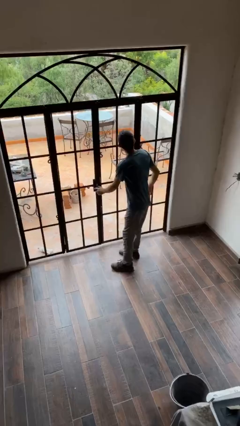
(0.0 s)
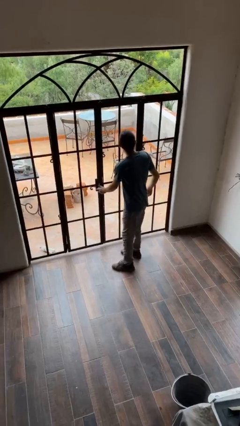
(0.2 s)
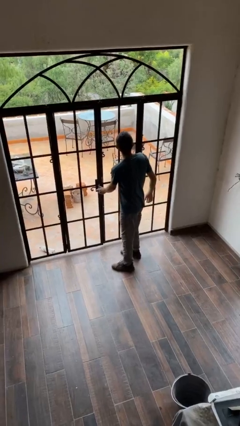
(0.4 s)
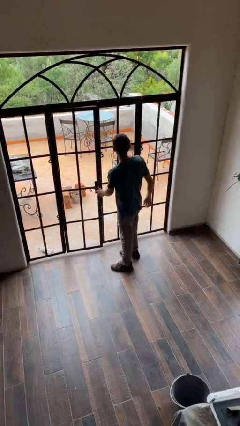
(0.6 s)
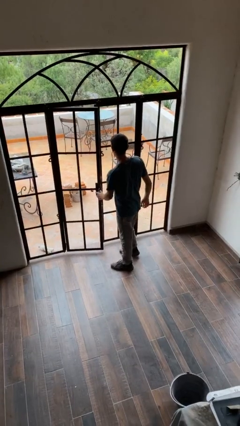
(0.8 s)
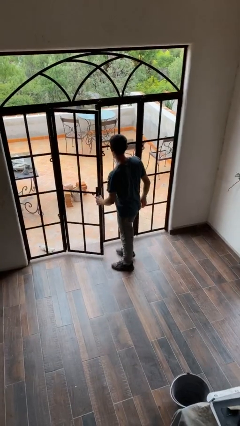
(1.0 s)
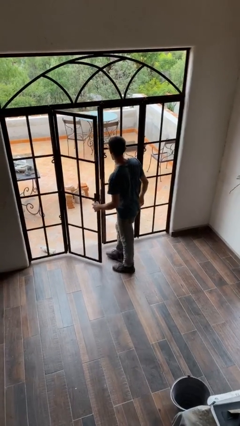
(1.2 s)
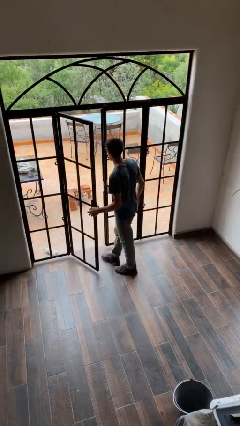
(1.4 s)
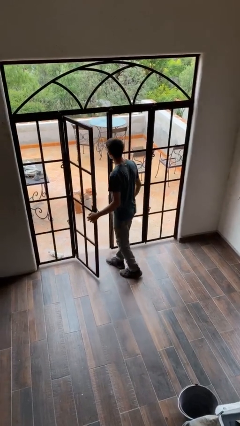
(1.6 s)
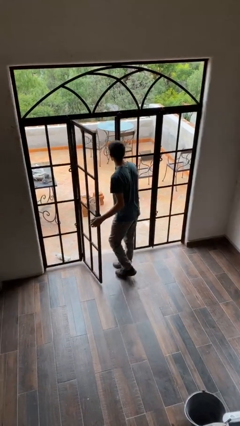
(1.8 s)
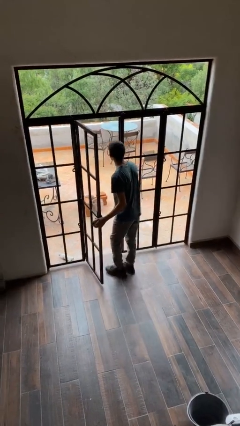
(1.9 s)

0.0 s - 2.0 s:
person opens facility door

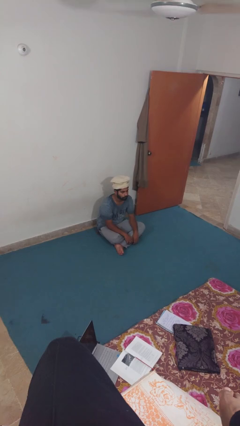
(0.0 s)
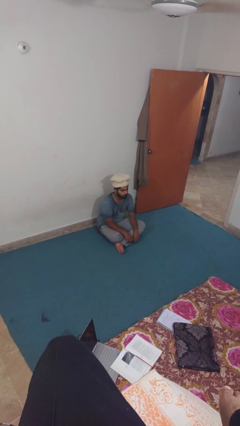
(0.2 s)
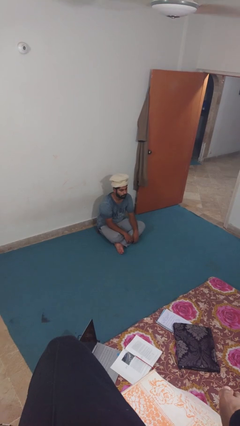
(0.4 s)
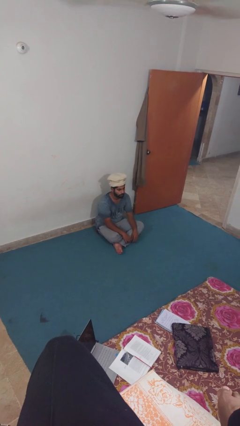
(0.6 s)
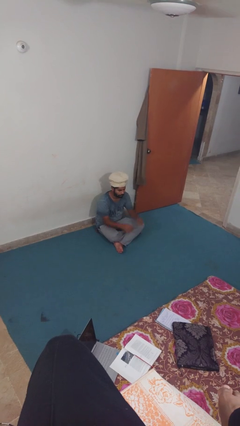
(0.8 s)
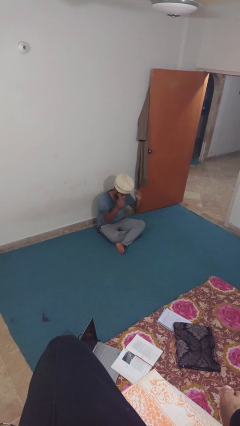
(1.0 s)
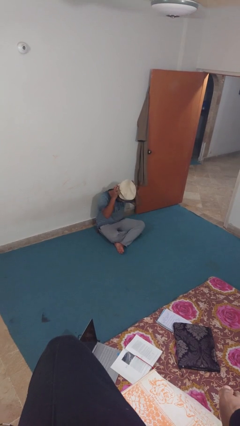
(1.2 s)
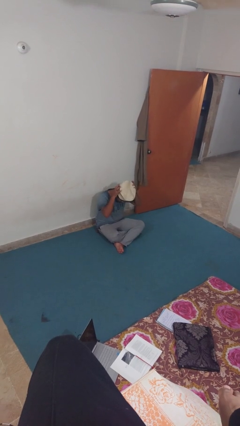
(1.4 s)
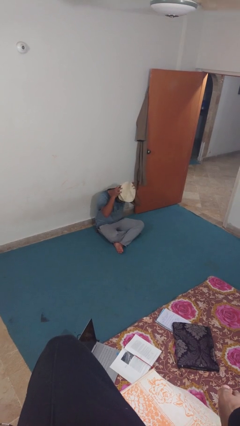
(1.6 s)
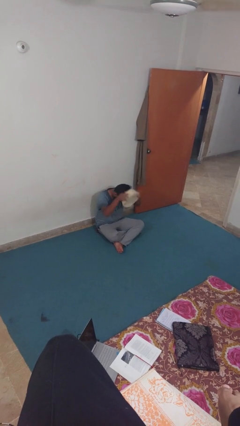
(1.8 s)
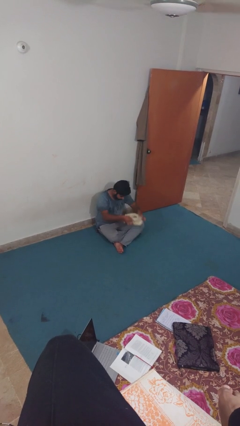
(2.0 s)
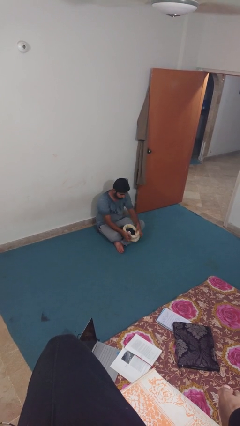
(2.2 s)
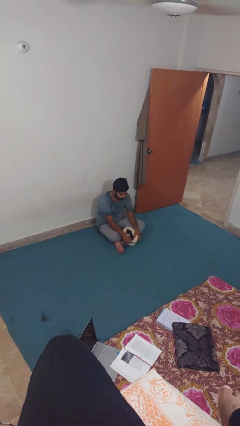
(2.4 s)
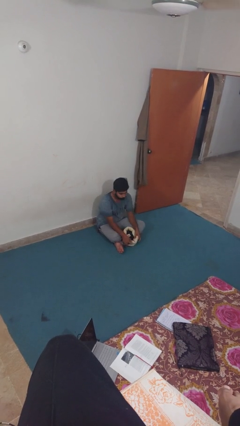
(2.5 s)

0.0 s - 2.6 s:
person takes off hat

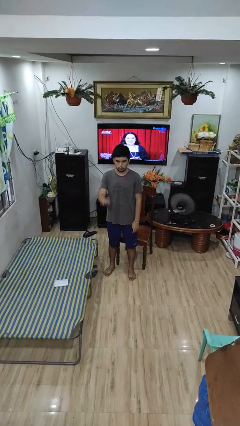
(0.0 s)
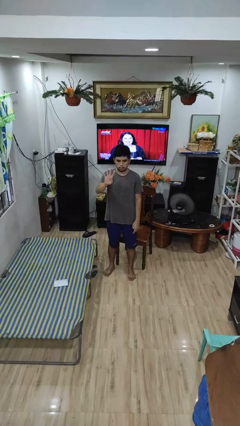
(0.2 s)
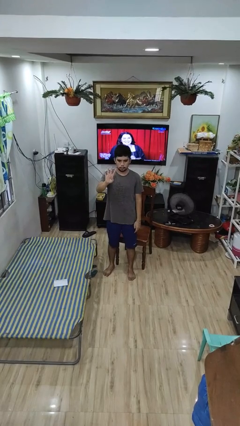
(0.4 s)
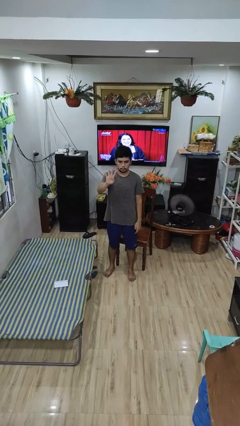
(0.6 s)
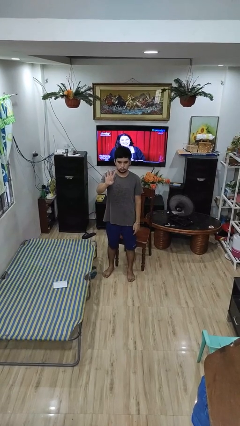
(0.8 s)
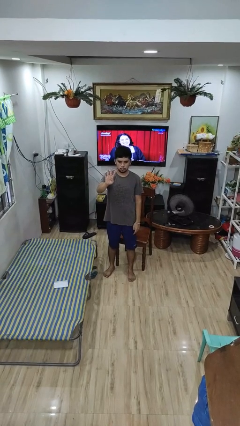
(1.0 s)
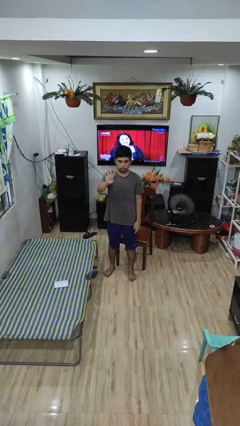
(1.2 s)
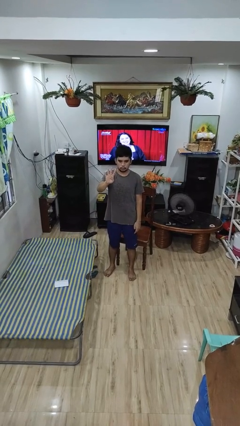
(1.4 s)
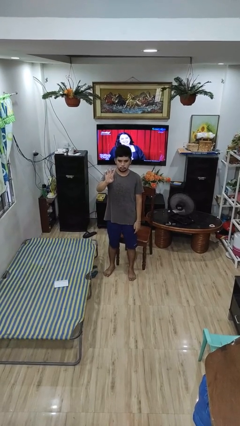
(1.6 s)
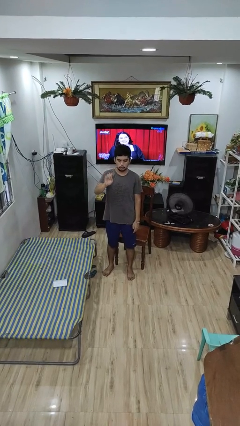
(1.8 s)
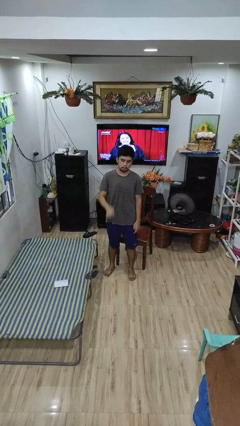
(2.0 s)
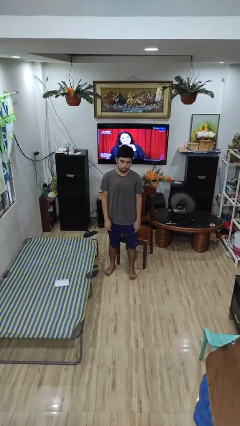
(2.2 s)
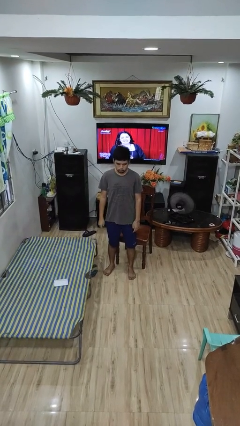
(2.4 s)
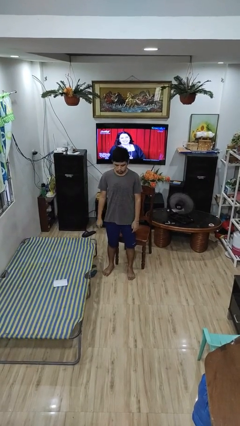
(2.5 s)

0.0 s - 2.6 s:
person gestures number four

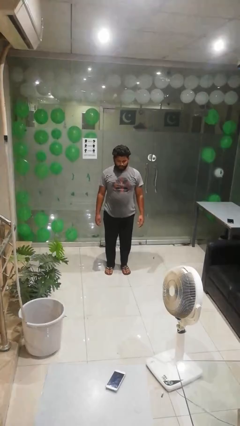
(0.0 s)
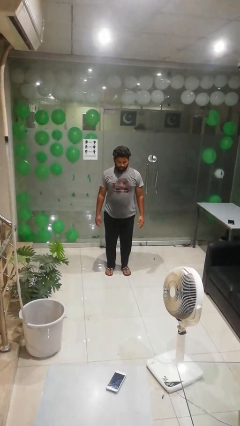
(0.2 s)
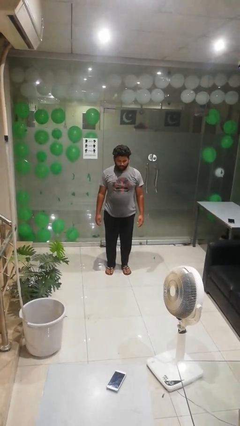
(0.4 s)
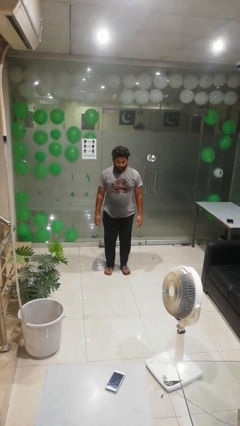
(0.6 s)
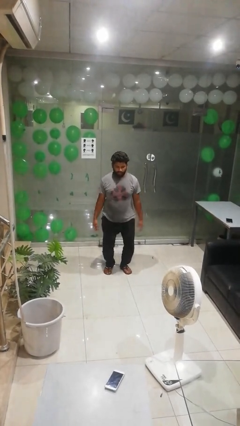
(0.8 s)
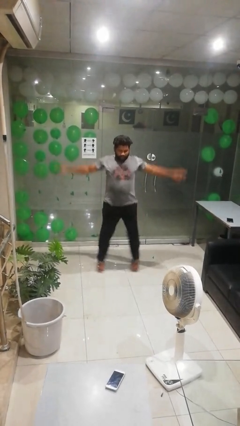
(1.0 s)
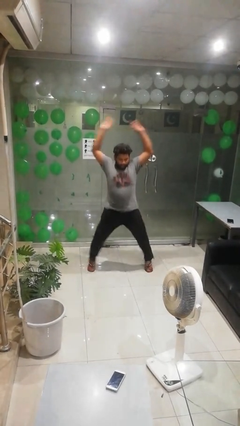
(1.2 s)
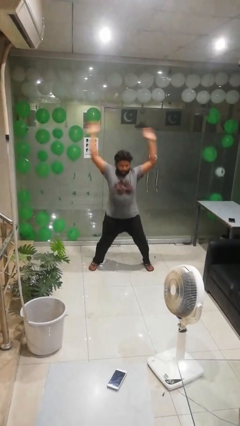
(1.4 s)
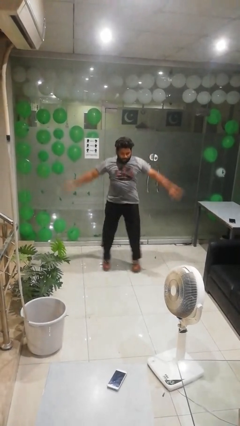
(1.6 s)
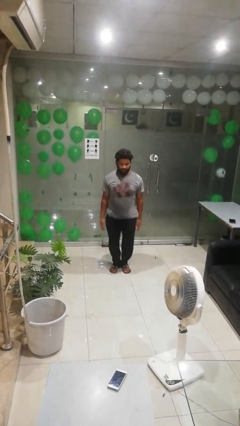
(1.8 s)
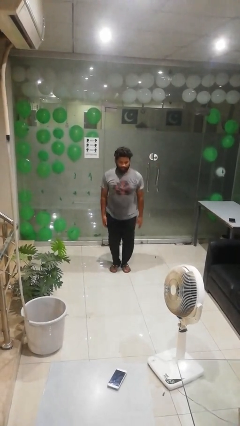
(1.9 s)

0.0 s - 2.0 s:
person exercises with jumping jacks

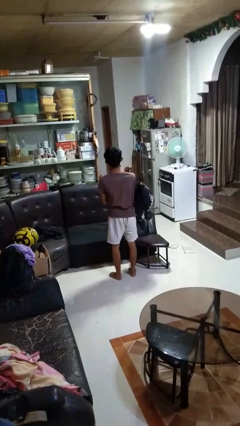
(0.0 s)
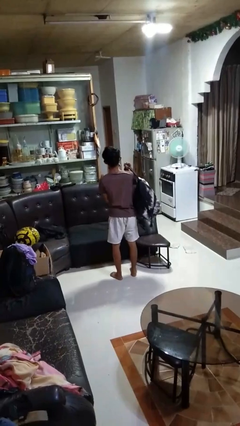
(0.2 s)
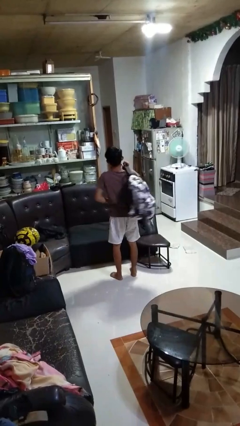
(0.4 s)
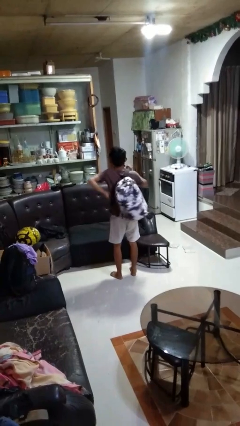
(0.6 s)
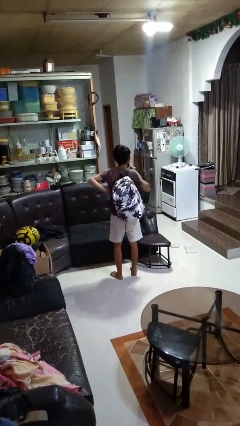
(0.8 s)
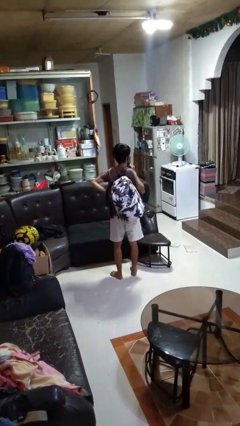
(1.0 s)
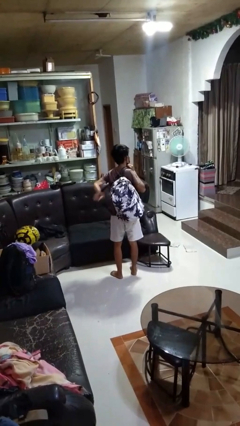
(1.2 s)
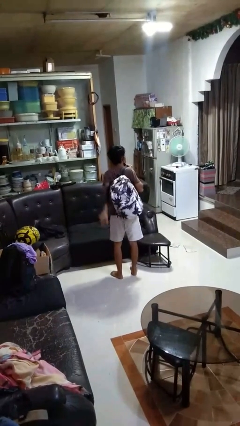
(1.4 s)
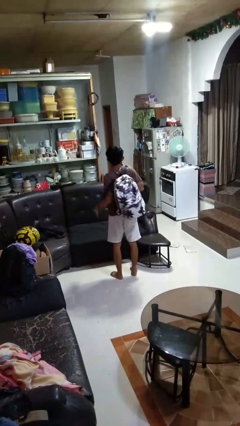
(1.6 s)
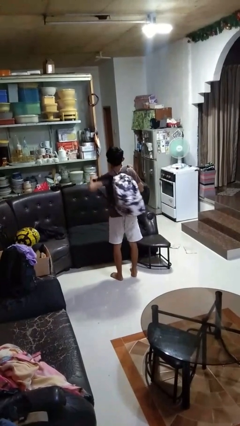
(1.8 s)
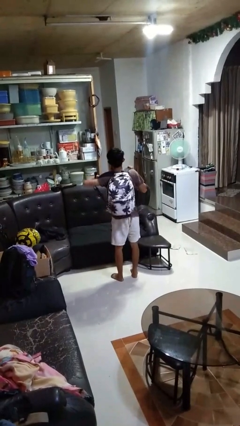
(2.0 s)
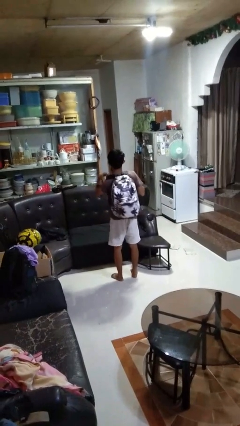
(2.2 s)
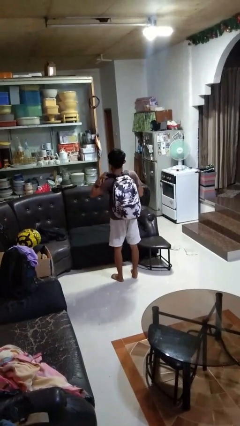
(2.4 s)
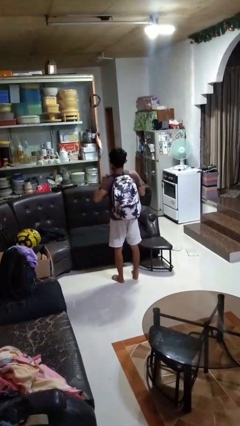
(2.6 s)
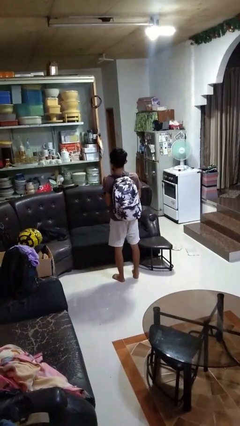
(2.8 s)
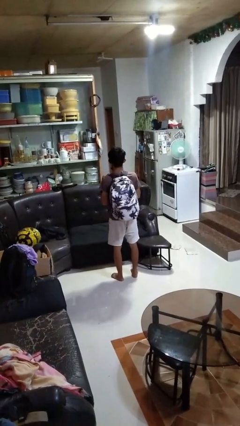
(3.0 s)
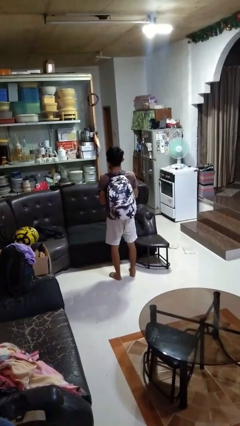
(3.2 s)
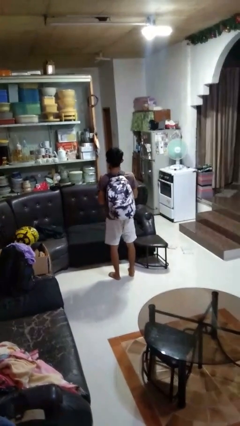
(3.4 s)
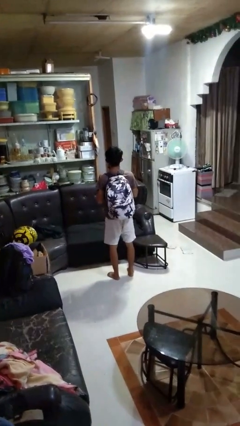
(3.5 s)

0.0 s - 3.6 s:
person puts on backpack

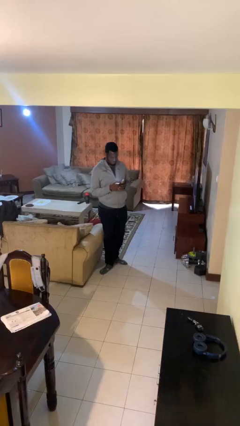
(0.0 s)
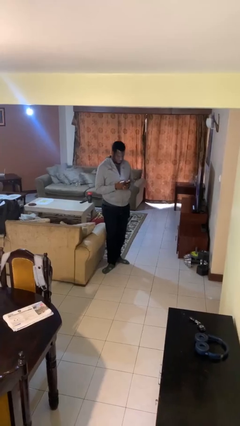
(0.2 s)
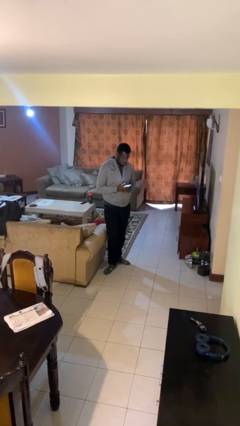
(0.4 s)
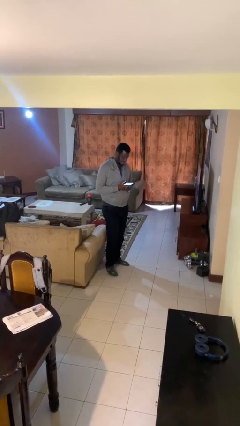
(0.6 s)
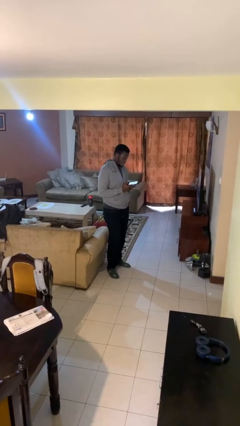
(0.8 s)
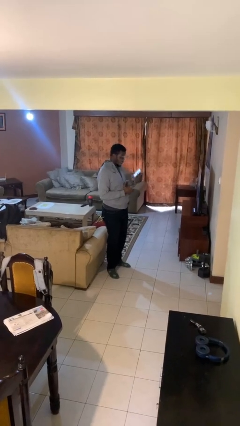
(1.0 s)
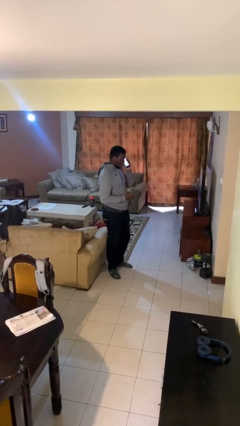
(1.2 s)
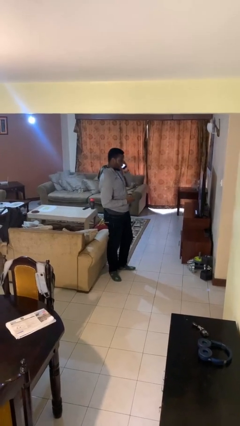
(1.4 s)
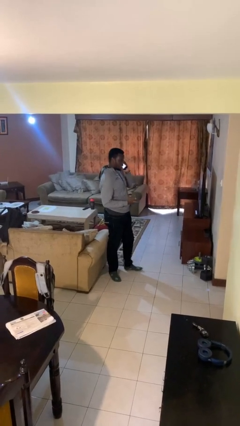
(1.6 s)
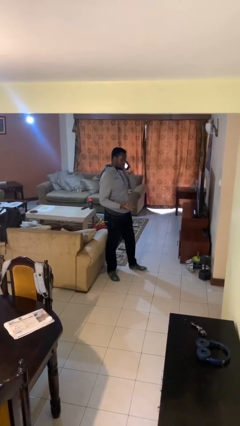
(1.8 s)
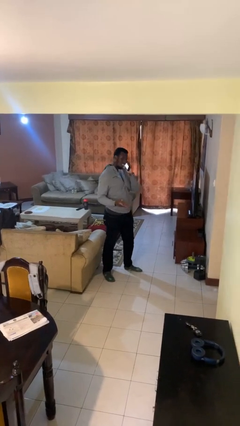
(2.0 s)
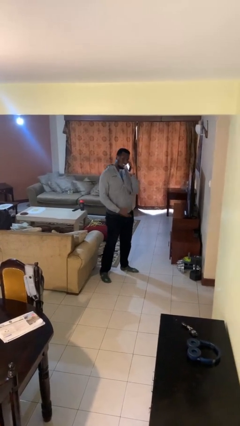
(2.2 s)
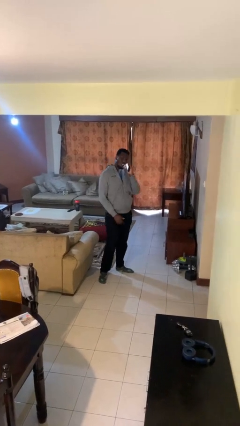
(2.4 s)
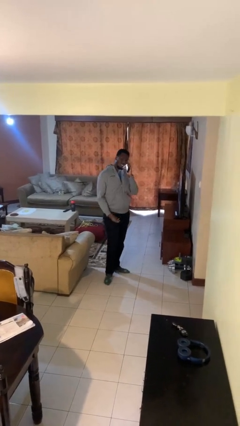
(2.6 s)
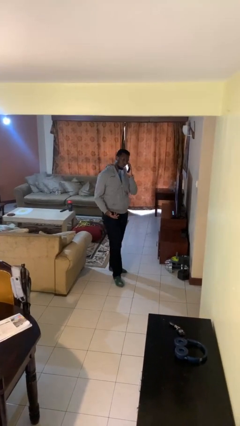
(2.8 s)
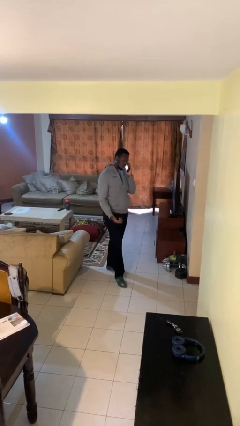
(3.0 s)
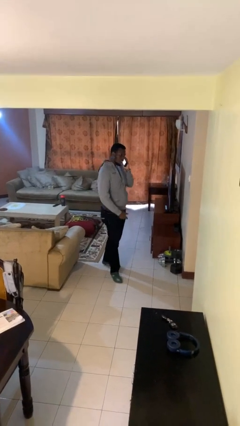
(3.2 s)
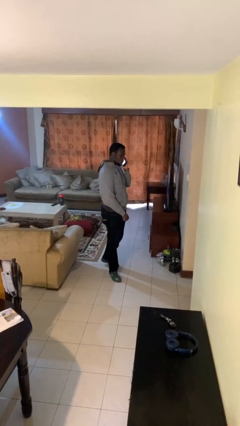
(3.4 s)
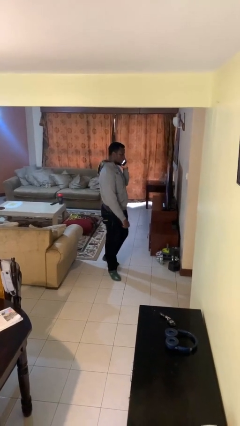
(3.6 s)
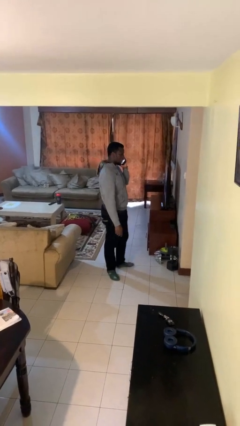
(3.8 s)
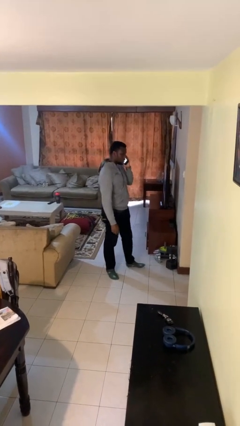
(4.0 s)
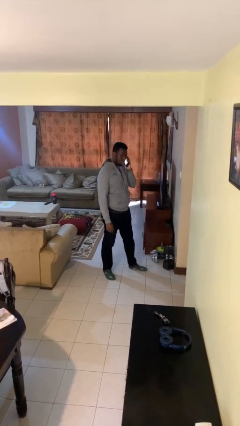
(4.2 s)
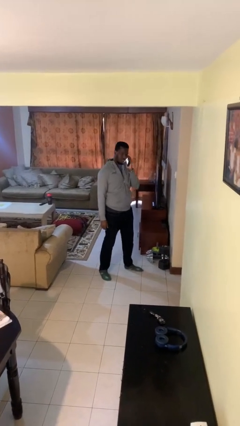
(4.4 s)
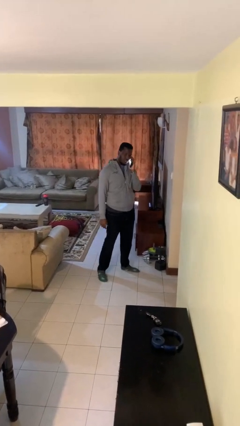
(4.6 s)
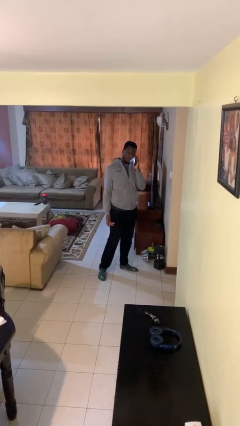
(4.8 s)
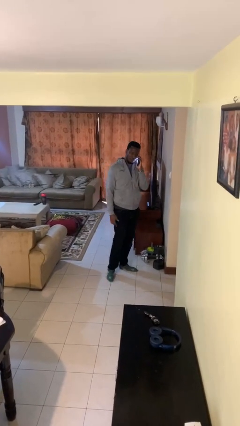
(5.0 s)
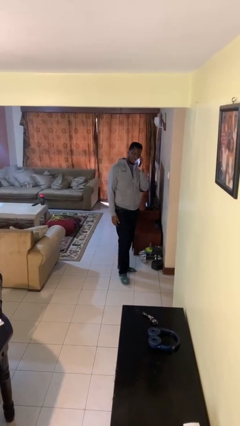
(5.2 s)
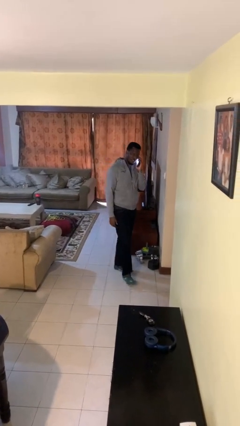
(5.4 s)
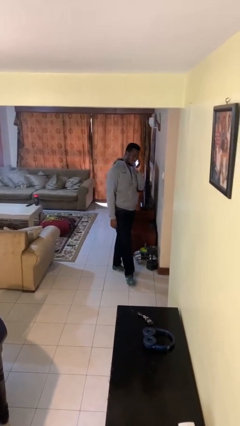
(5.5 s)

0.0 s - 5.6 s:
person talks on phone
